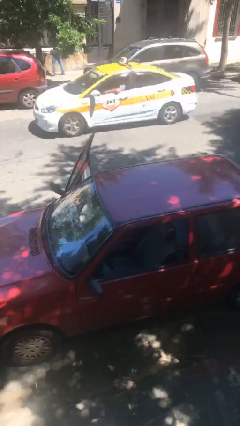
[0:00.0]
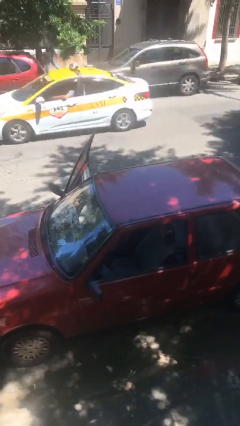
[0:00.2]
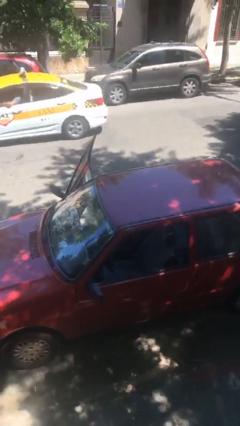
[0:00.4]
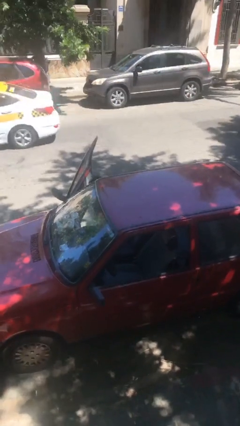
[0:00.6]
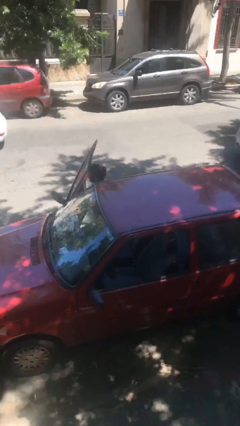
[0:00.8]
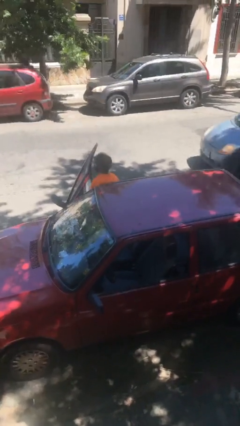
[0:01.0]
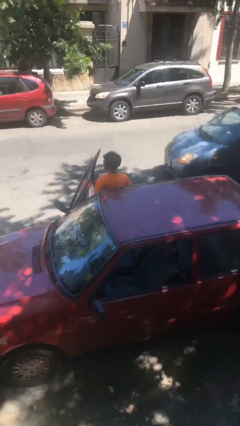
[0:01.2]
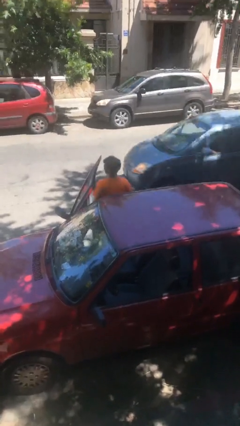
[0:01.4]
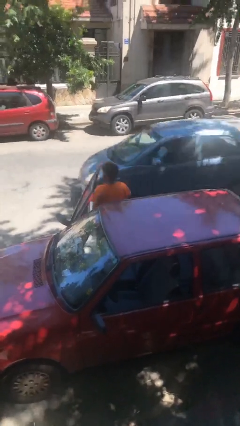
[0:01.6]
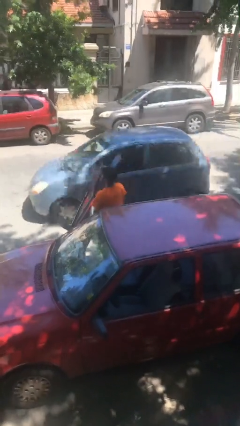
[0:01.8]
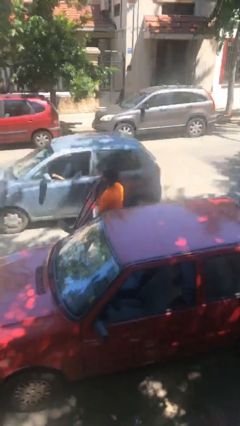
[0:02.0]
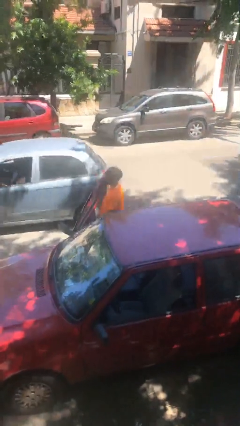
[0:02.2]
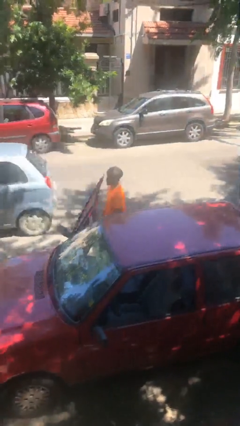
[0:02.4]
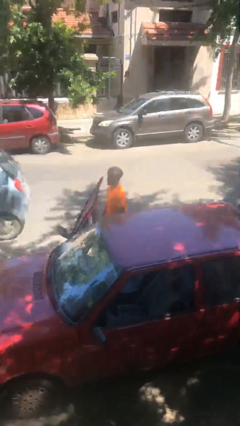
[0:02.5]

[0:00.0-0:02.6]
person exits car

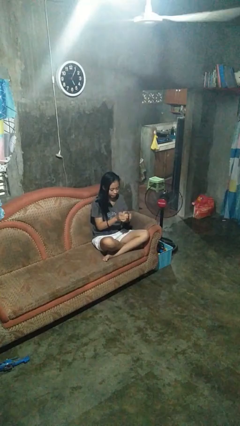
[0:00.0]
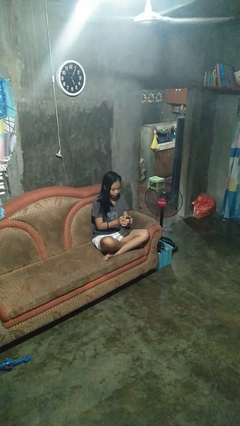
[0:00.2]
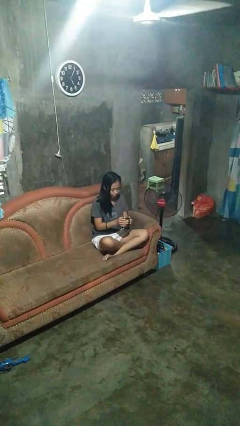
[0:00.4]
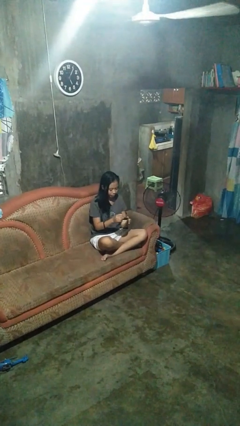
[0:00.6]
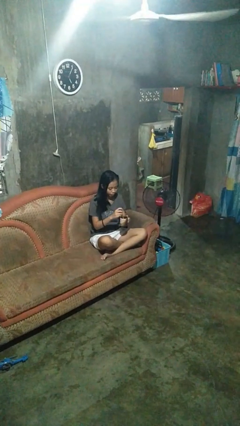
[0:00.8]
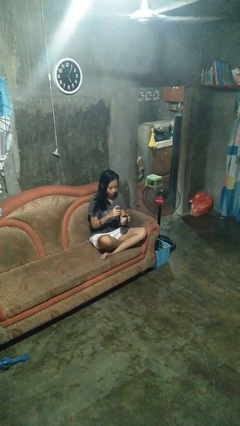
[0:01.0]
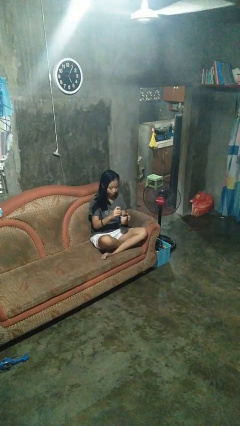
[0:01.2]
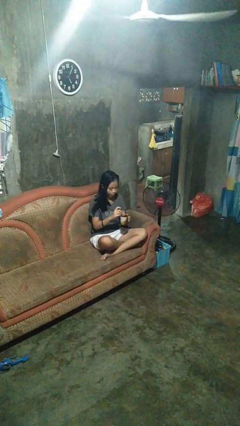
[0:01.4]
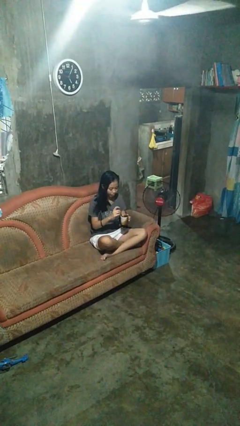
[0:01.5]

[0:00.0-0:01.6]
person stirs mug

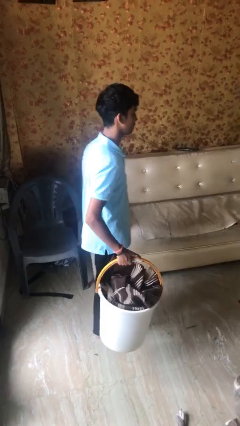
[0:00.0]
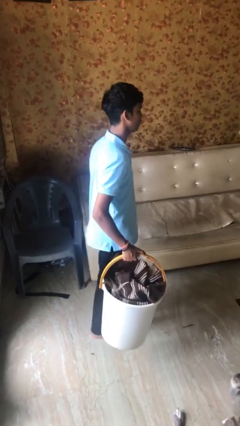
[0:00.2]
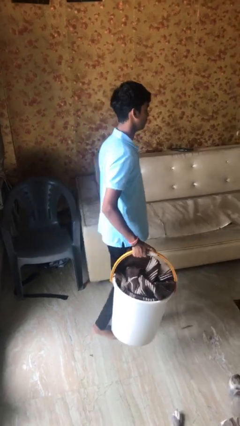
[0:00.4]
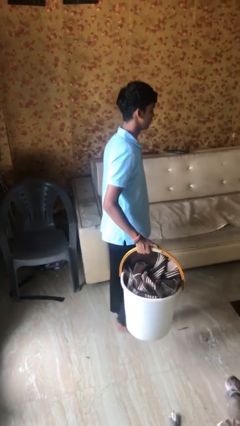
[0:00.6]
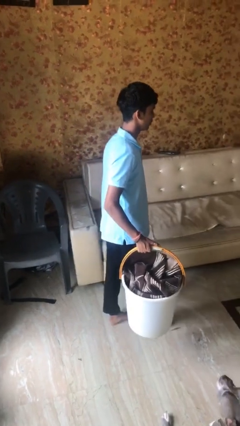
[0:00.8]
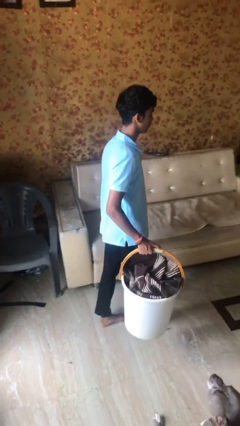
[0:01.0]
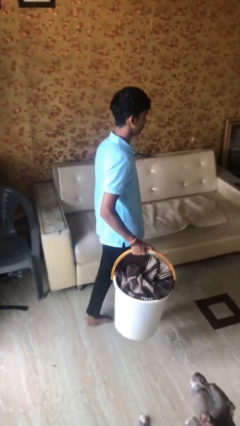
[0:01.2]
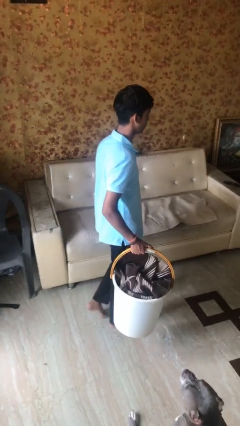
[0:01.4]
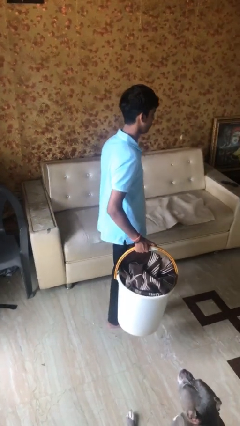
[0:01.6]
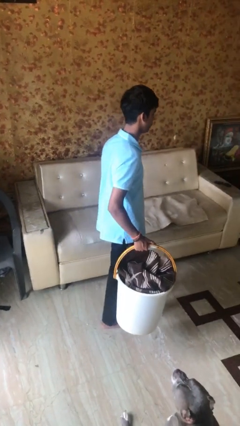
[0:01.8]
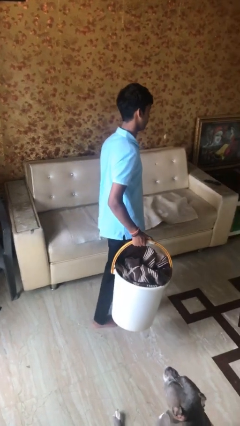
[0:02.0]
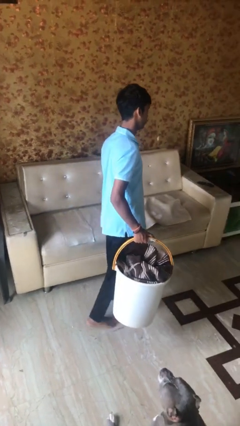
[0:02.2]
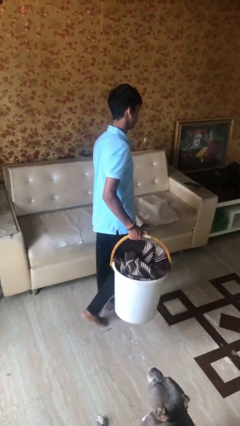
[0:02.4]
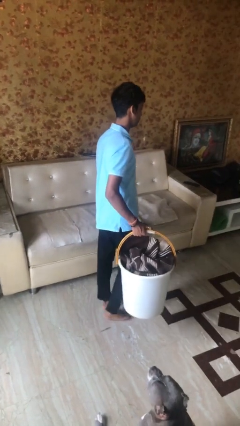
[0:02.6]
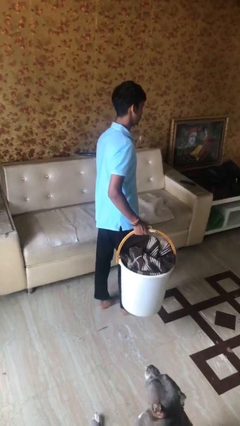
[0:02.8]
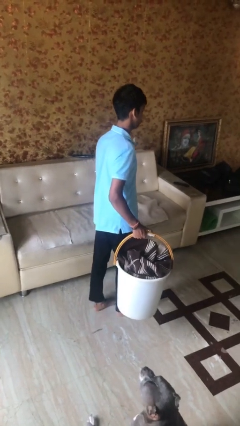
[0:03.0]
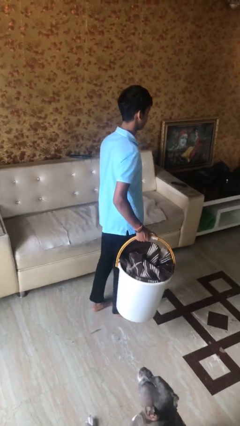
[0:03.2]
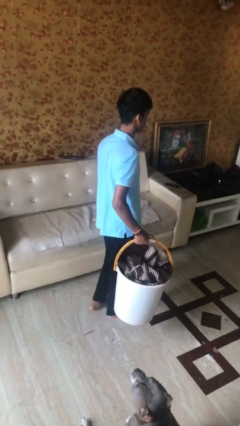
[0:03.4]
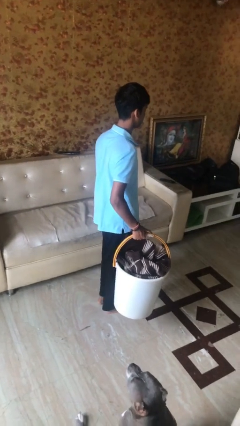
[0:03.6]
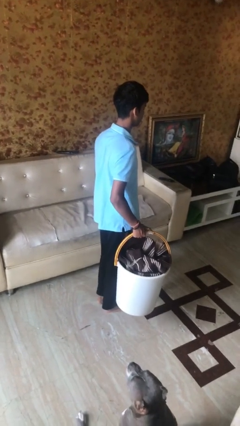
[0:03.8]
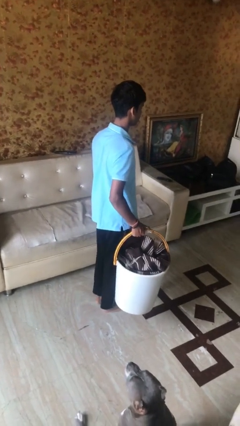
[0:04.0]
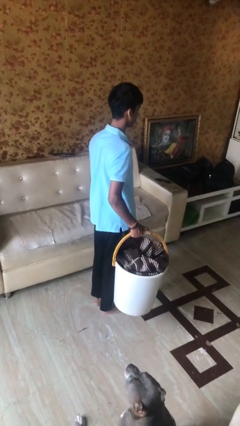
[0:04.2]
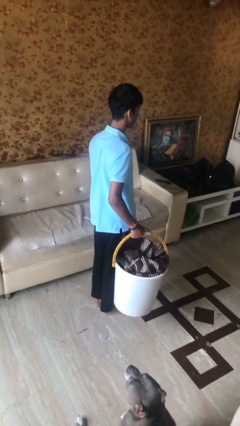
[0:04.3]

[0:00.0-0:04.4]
person carries laundry basket

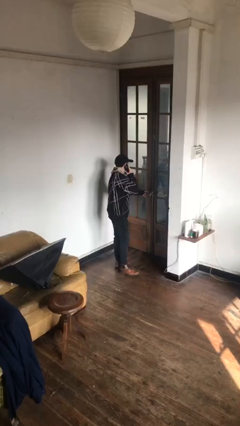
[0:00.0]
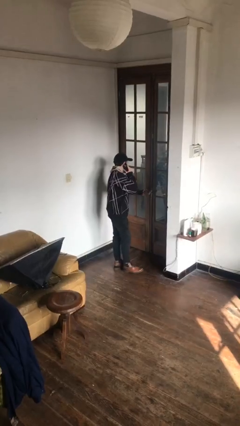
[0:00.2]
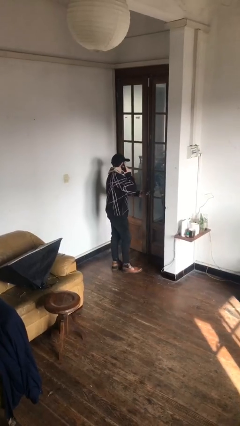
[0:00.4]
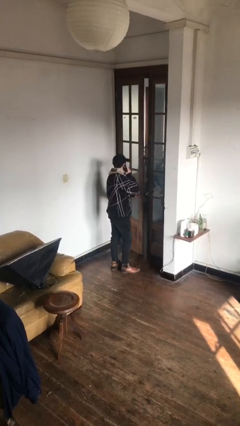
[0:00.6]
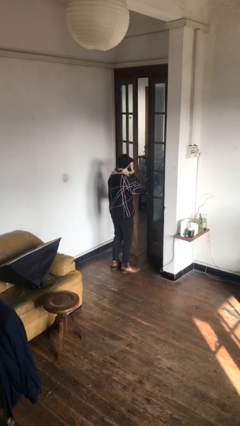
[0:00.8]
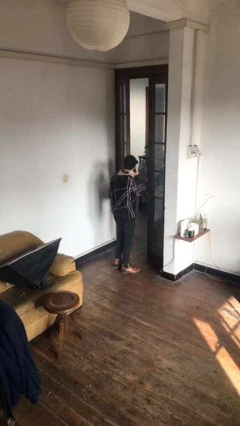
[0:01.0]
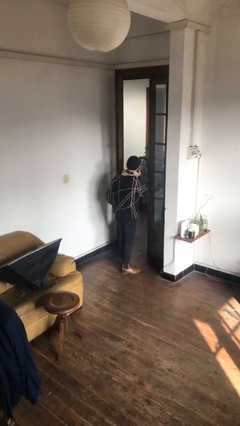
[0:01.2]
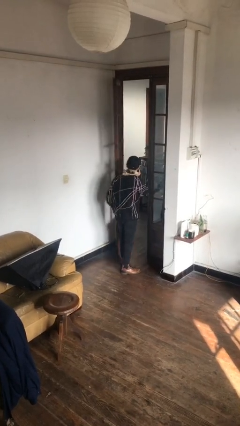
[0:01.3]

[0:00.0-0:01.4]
person opens facility door

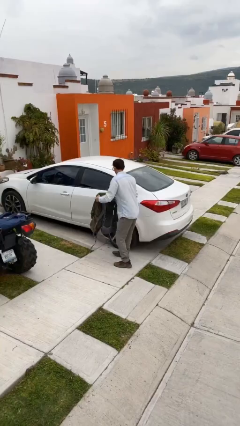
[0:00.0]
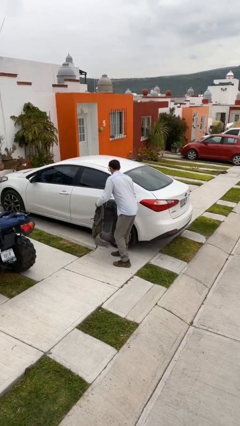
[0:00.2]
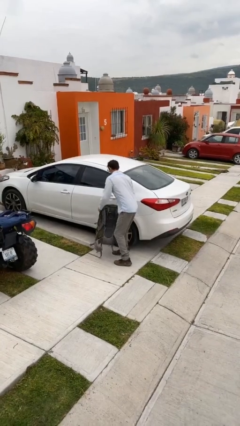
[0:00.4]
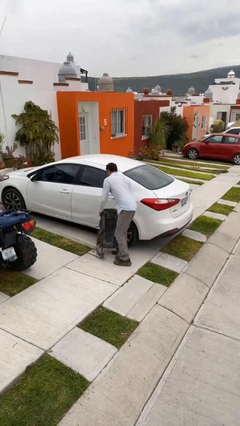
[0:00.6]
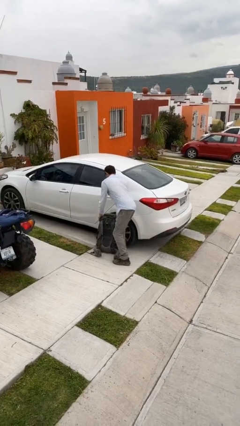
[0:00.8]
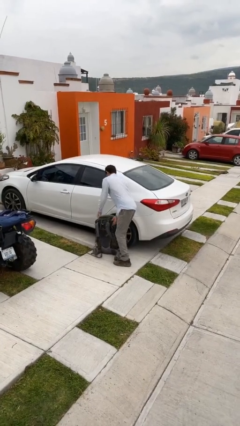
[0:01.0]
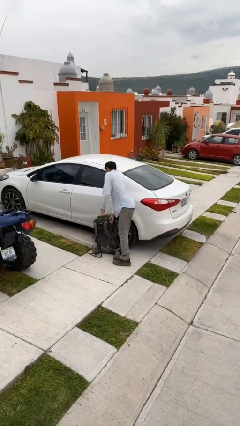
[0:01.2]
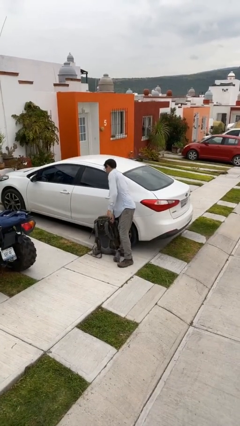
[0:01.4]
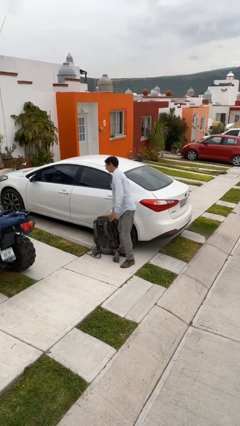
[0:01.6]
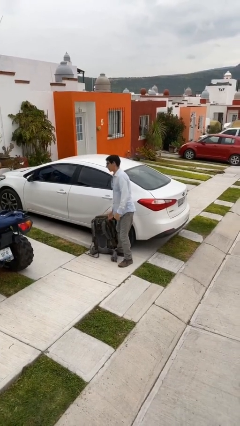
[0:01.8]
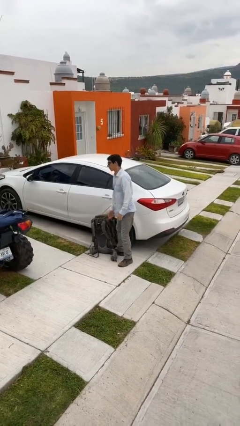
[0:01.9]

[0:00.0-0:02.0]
person puts down object on floor

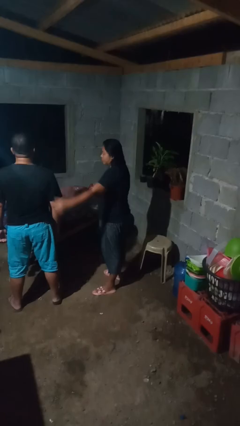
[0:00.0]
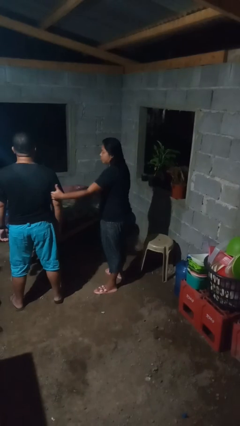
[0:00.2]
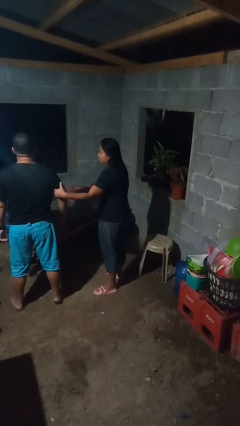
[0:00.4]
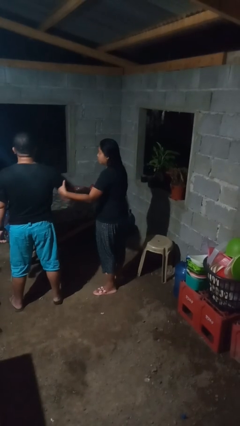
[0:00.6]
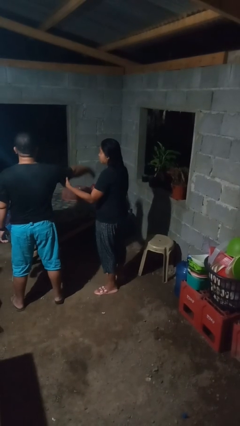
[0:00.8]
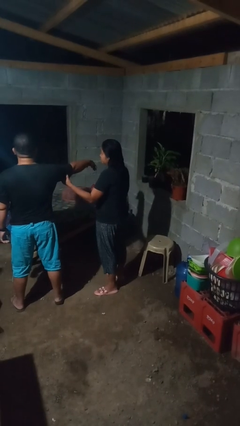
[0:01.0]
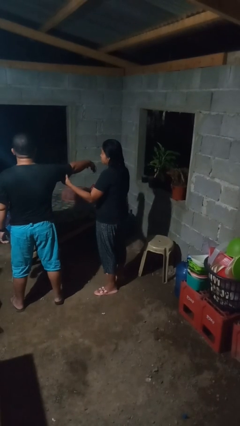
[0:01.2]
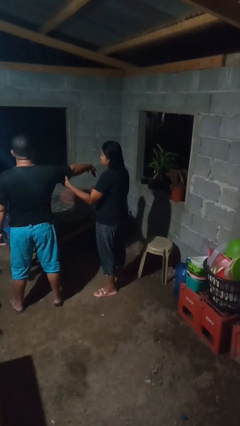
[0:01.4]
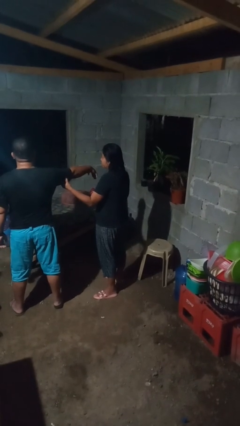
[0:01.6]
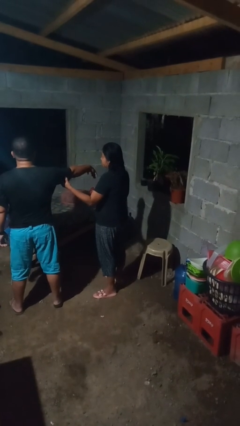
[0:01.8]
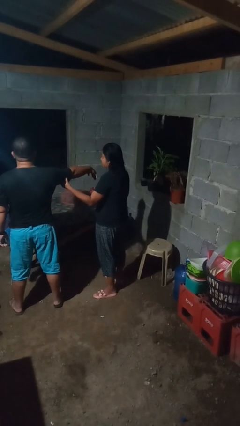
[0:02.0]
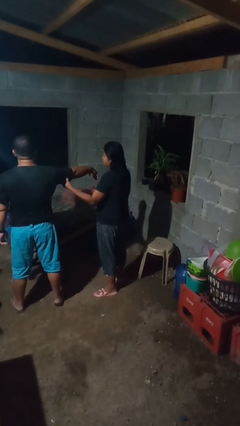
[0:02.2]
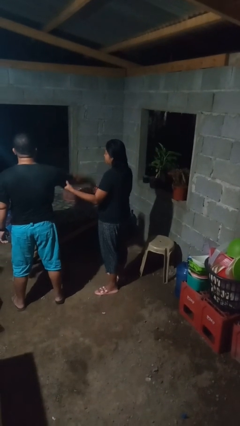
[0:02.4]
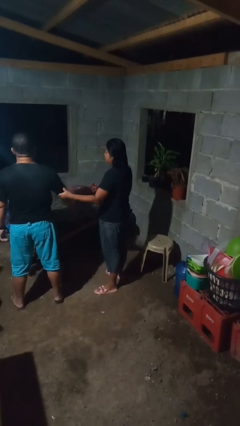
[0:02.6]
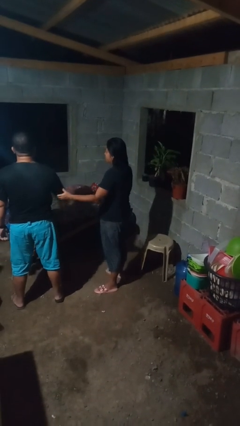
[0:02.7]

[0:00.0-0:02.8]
person grabs person by bicep

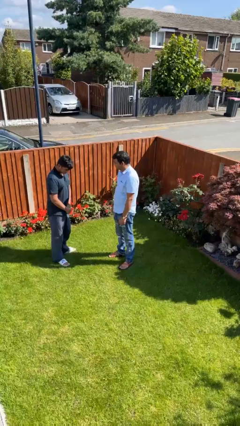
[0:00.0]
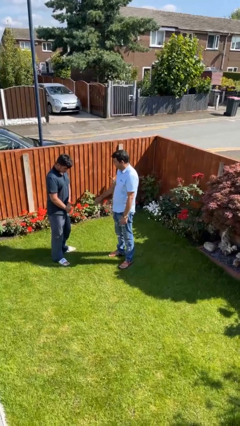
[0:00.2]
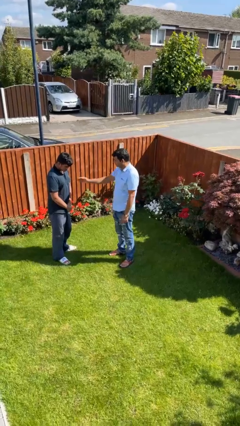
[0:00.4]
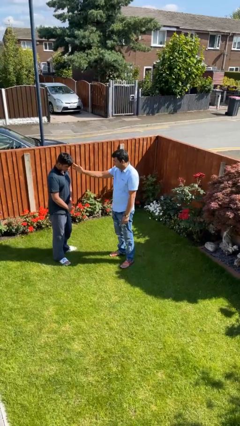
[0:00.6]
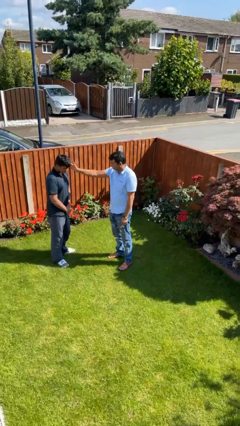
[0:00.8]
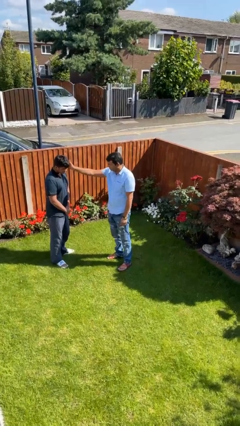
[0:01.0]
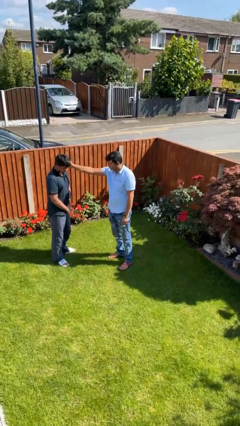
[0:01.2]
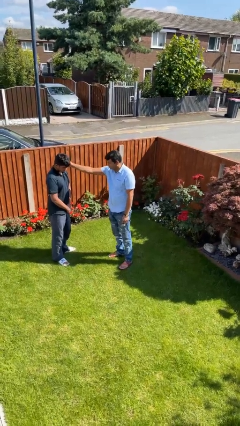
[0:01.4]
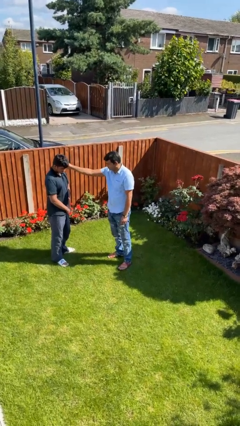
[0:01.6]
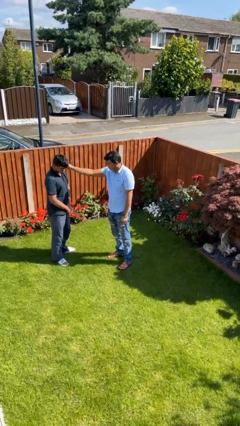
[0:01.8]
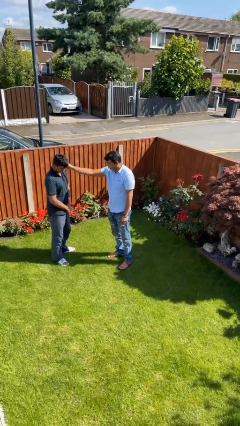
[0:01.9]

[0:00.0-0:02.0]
person touches face of person
